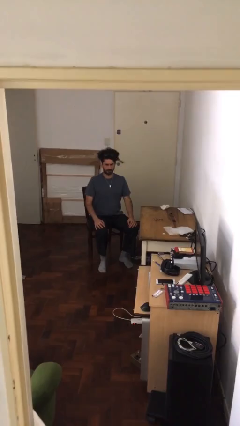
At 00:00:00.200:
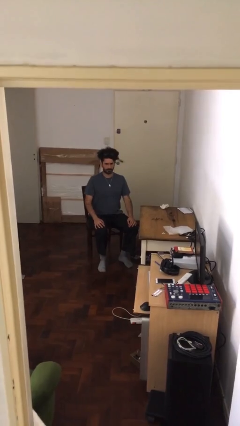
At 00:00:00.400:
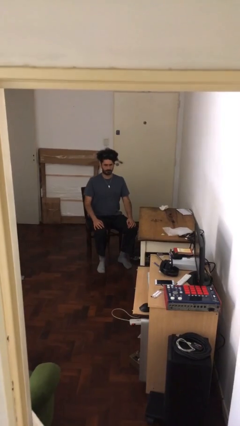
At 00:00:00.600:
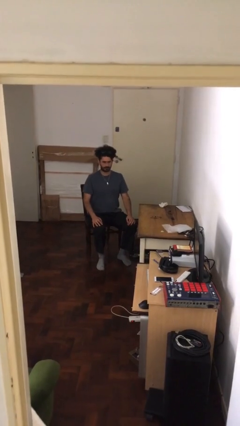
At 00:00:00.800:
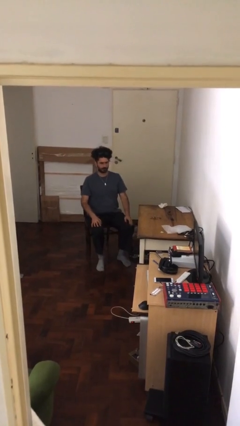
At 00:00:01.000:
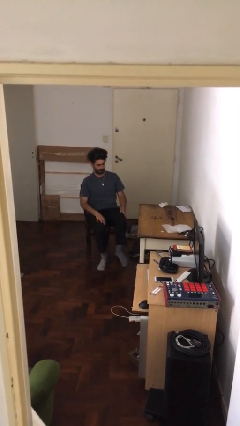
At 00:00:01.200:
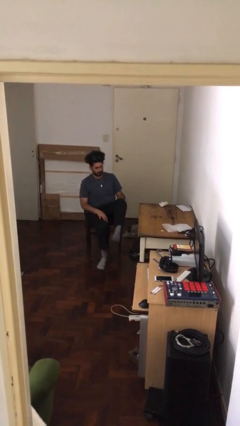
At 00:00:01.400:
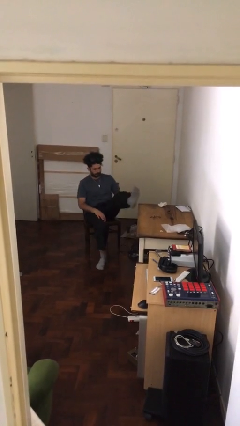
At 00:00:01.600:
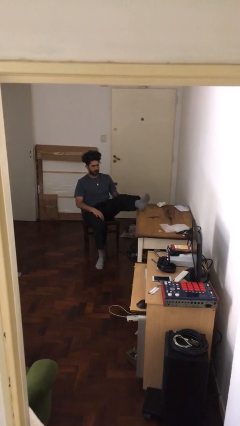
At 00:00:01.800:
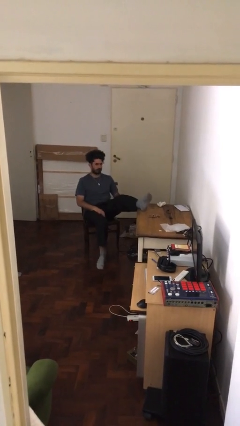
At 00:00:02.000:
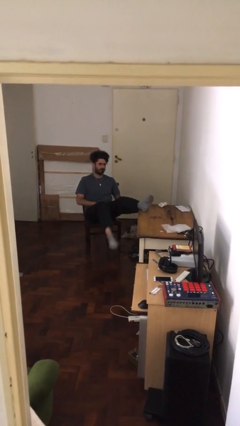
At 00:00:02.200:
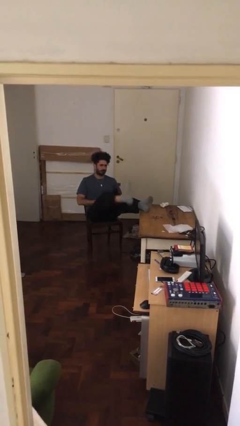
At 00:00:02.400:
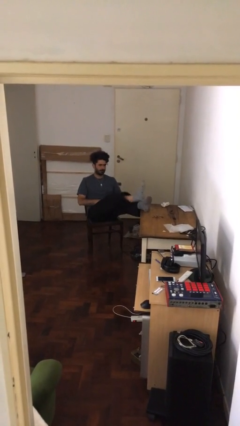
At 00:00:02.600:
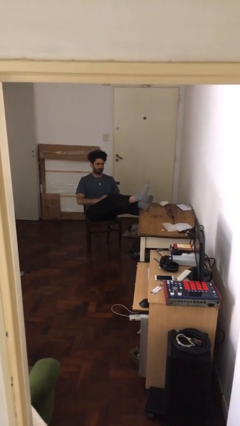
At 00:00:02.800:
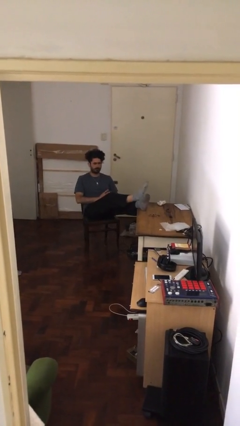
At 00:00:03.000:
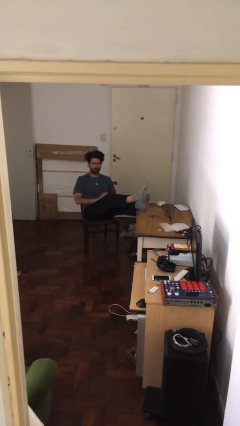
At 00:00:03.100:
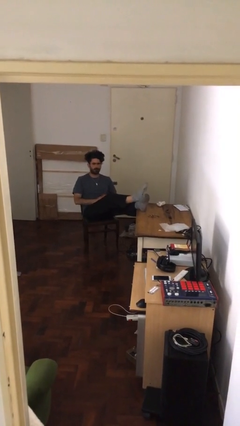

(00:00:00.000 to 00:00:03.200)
person puts feet up

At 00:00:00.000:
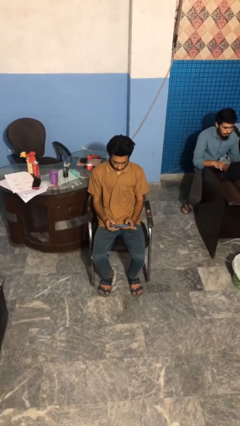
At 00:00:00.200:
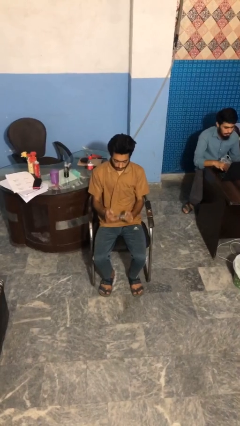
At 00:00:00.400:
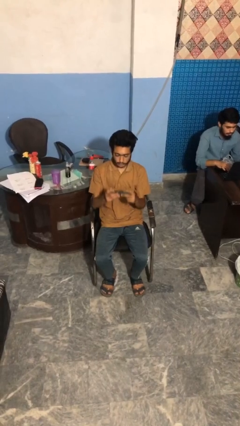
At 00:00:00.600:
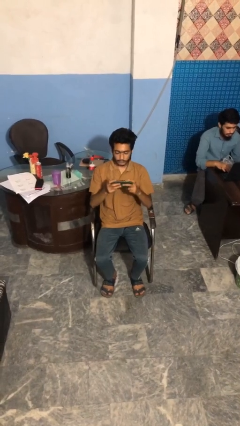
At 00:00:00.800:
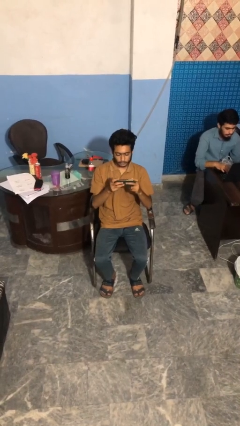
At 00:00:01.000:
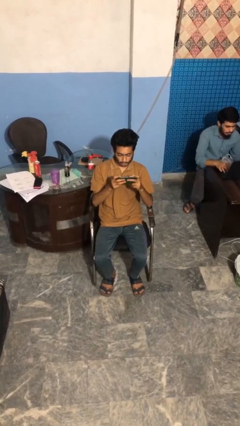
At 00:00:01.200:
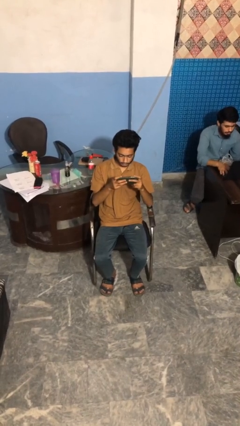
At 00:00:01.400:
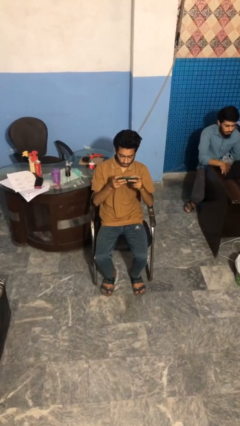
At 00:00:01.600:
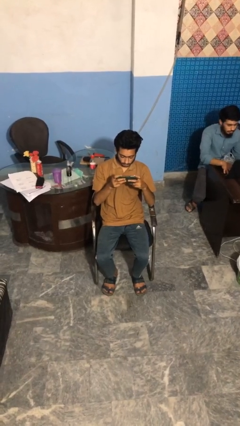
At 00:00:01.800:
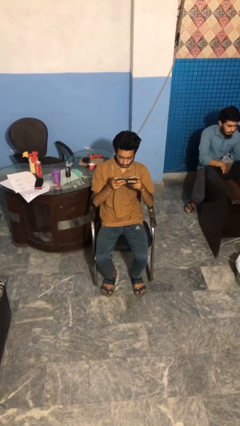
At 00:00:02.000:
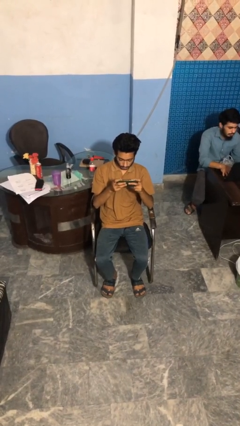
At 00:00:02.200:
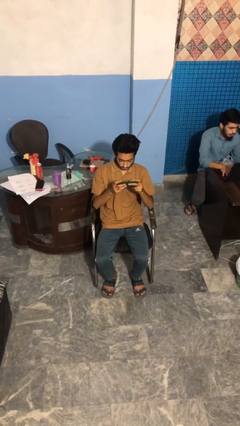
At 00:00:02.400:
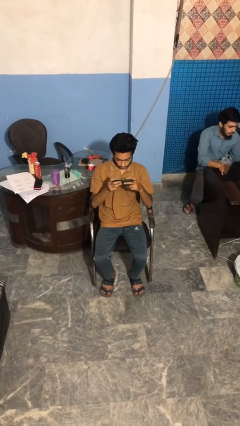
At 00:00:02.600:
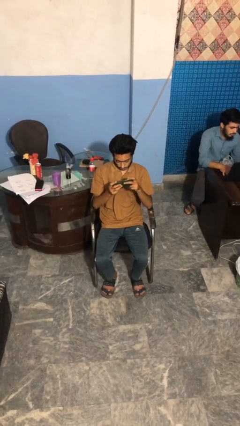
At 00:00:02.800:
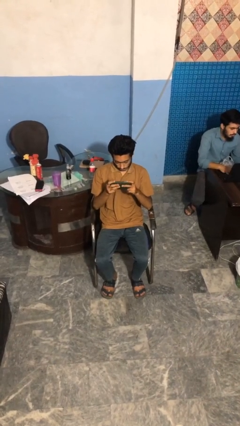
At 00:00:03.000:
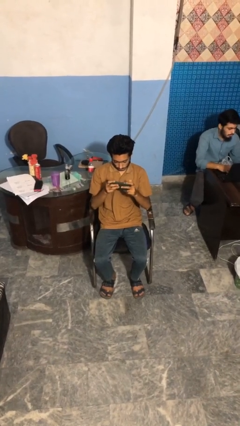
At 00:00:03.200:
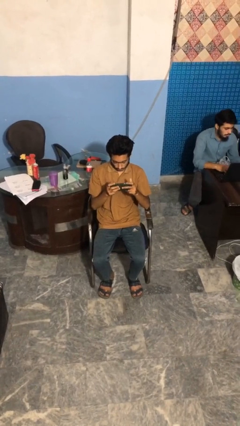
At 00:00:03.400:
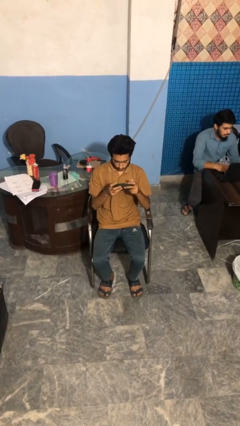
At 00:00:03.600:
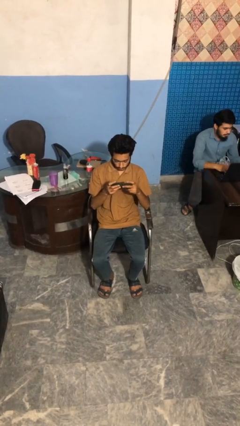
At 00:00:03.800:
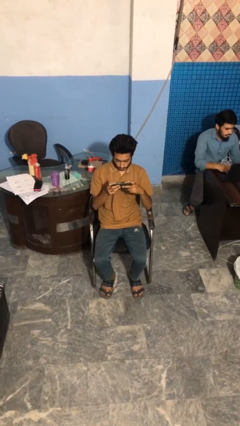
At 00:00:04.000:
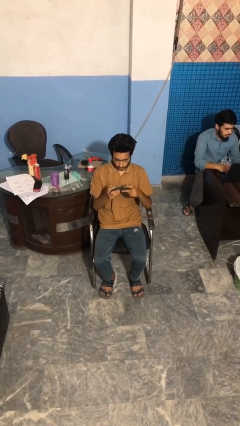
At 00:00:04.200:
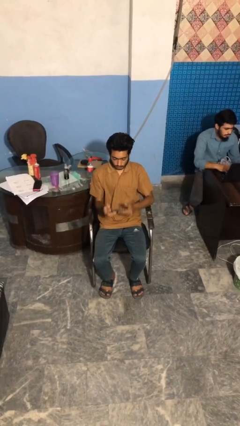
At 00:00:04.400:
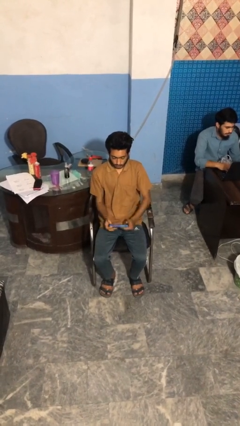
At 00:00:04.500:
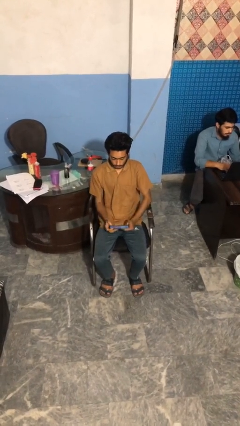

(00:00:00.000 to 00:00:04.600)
person interacts with handheld game

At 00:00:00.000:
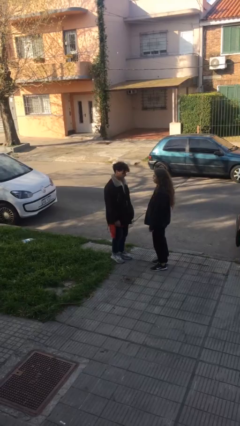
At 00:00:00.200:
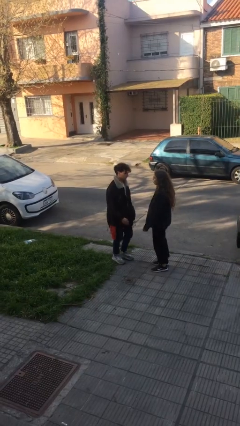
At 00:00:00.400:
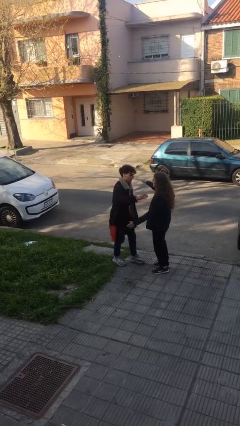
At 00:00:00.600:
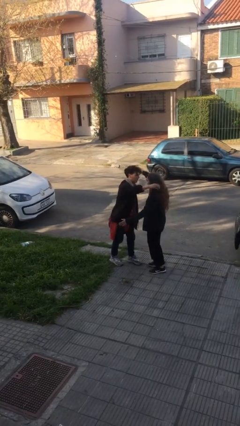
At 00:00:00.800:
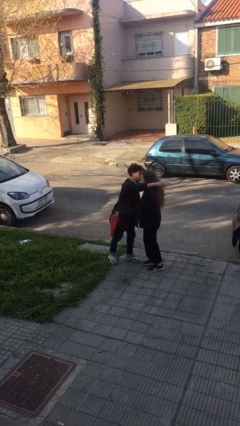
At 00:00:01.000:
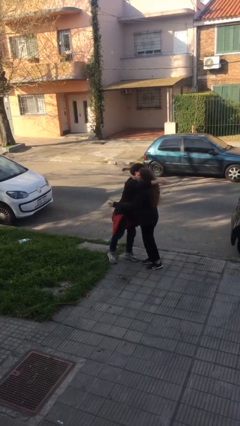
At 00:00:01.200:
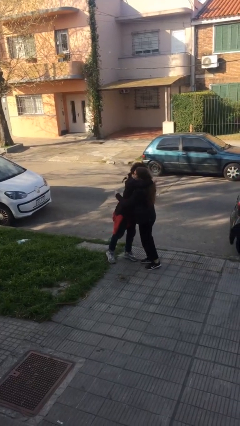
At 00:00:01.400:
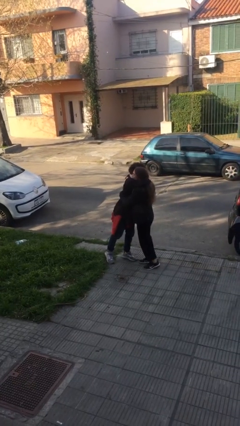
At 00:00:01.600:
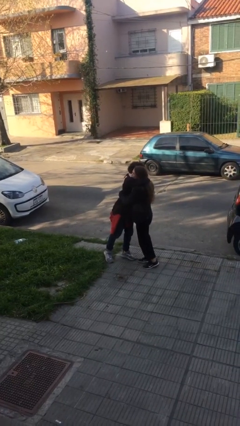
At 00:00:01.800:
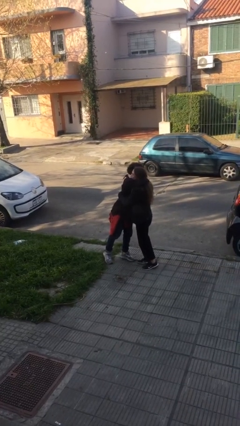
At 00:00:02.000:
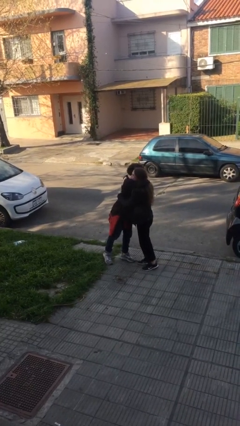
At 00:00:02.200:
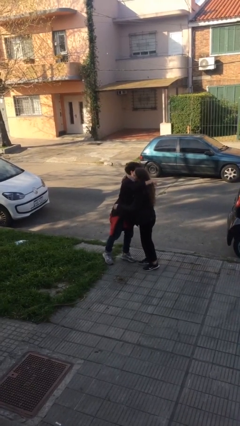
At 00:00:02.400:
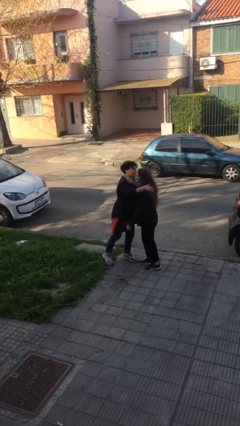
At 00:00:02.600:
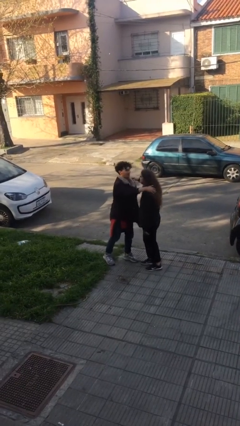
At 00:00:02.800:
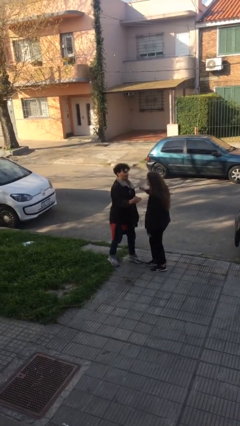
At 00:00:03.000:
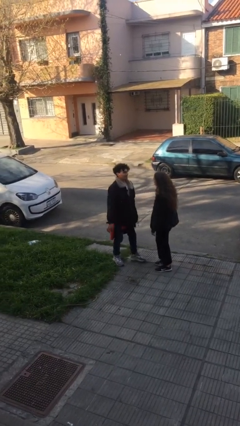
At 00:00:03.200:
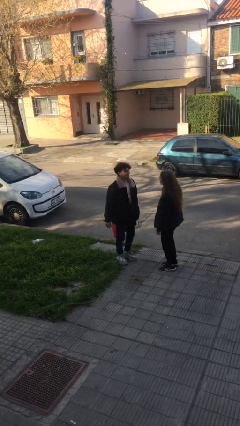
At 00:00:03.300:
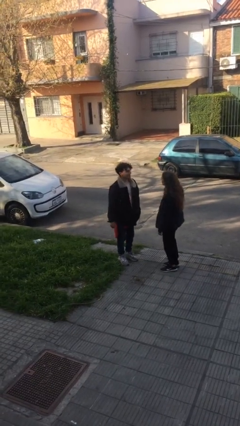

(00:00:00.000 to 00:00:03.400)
person embraces person

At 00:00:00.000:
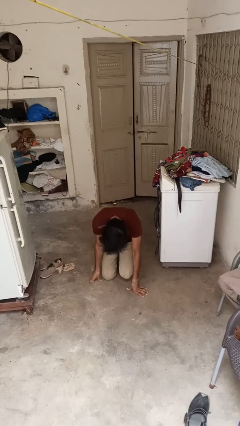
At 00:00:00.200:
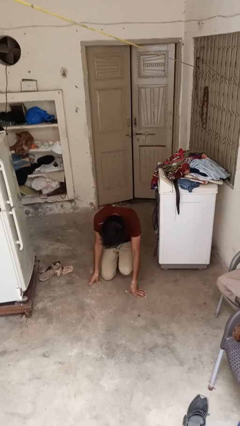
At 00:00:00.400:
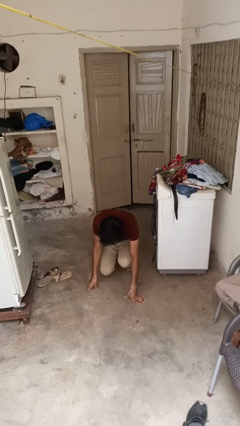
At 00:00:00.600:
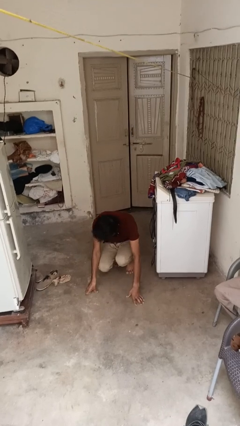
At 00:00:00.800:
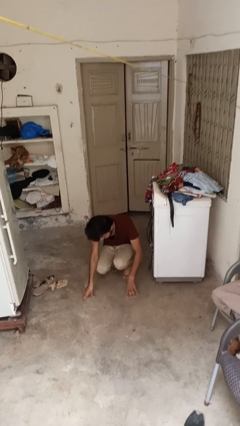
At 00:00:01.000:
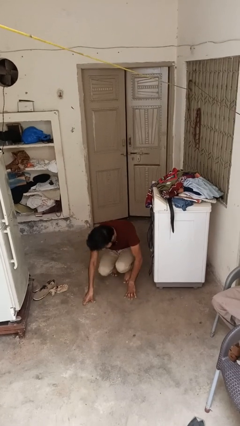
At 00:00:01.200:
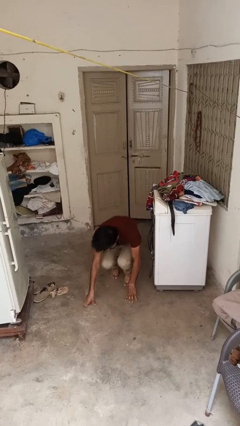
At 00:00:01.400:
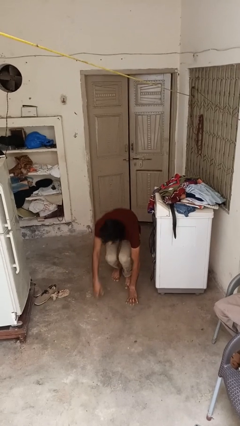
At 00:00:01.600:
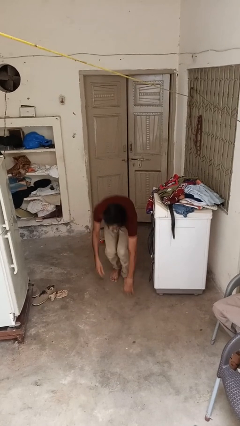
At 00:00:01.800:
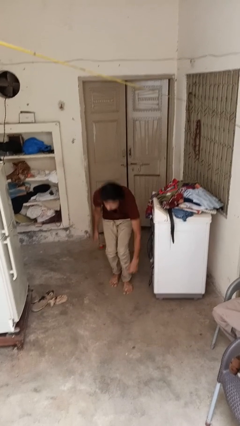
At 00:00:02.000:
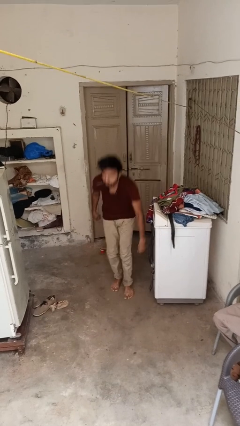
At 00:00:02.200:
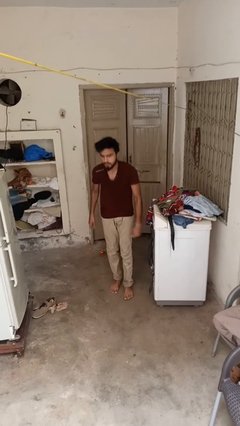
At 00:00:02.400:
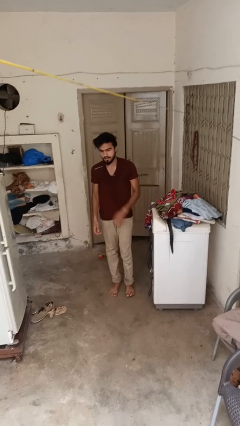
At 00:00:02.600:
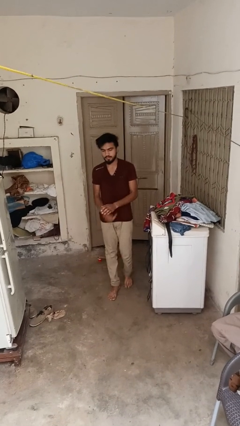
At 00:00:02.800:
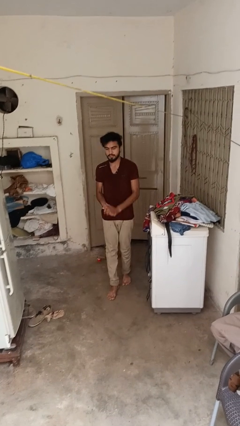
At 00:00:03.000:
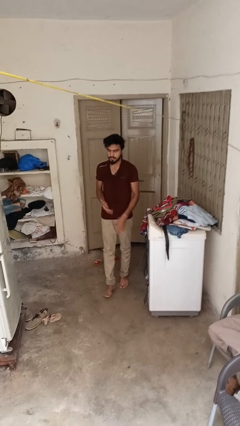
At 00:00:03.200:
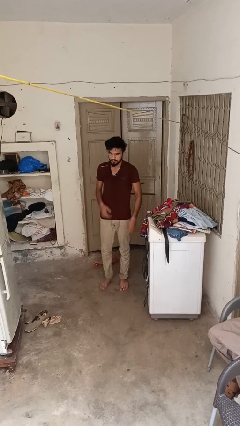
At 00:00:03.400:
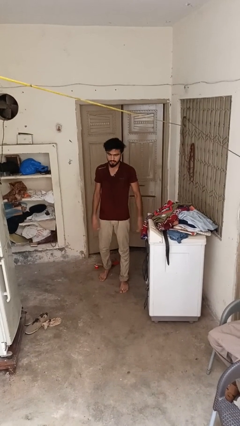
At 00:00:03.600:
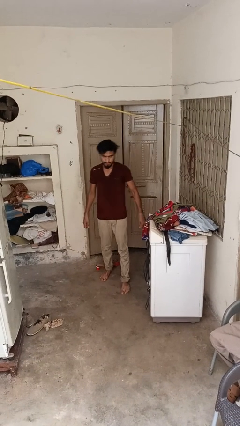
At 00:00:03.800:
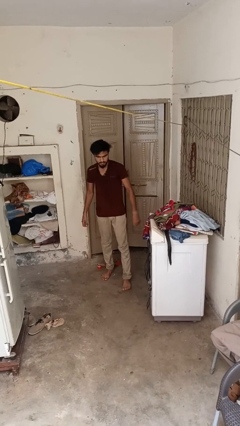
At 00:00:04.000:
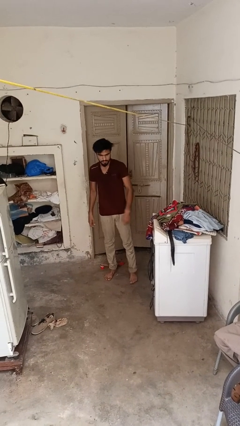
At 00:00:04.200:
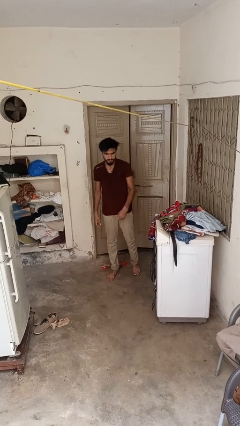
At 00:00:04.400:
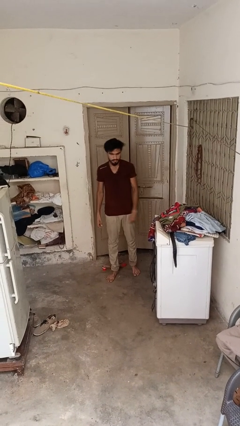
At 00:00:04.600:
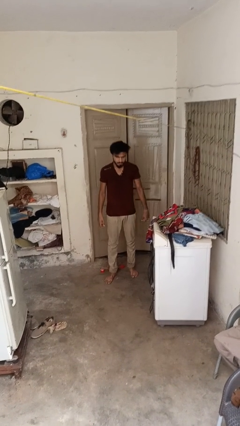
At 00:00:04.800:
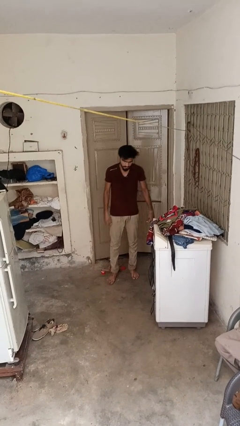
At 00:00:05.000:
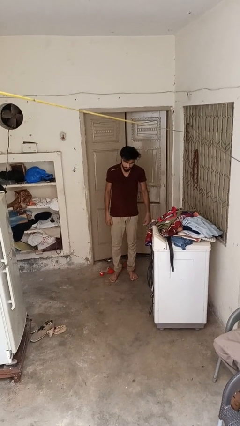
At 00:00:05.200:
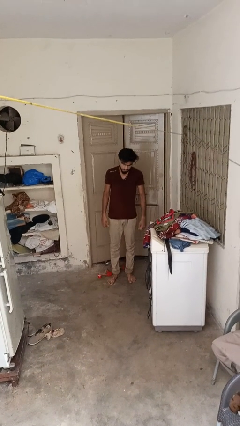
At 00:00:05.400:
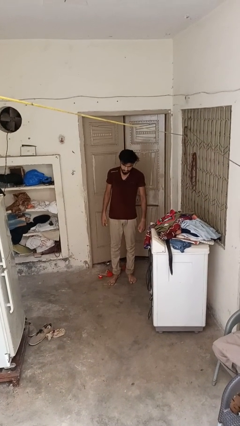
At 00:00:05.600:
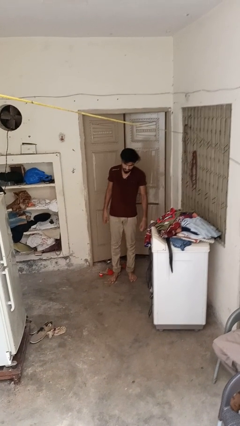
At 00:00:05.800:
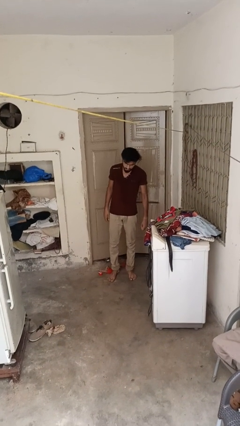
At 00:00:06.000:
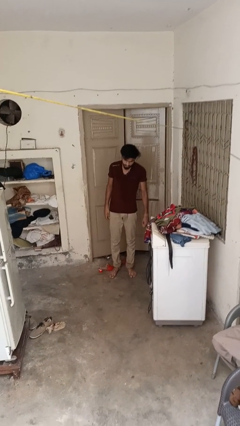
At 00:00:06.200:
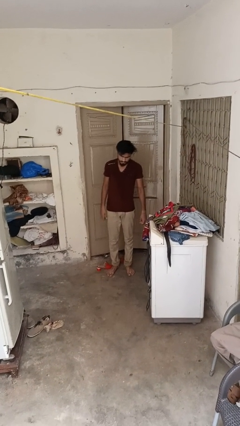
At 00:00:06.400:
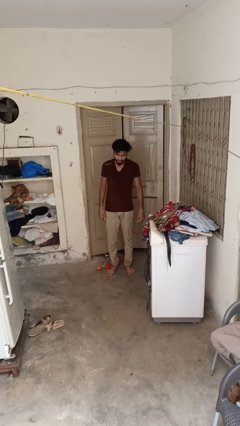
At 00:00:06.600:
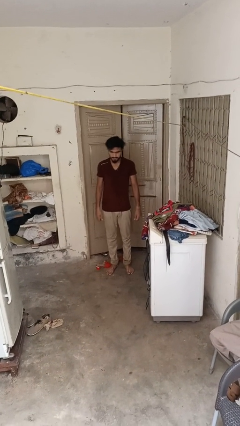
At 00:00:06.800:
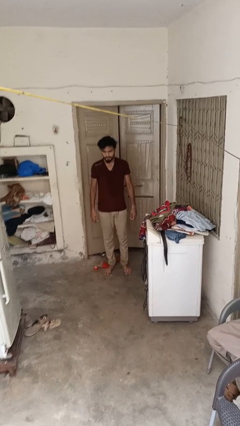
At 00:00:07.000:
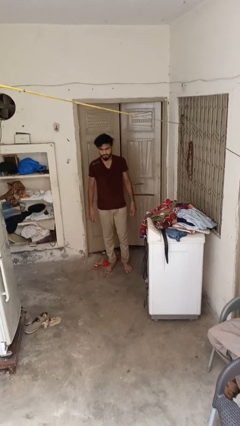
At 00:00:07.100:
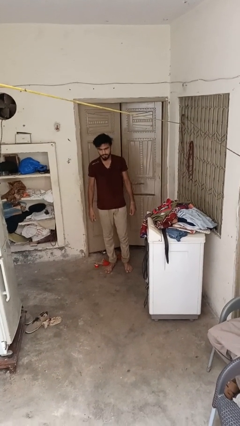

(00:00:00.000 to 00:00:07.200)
person stands up from floor
